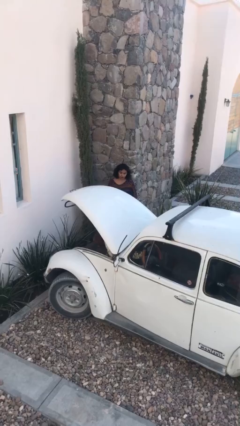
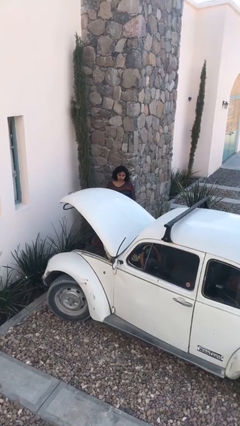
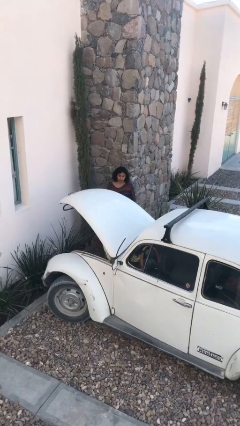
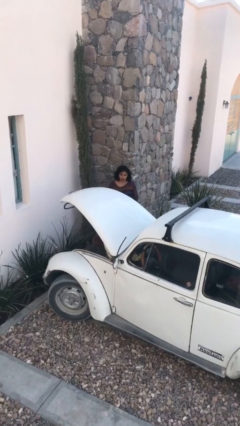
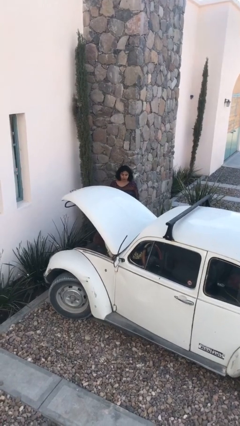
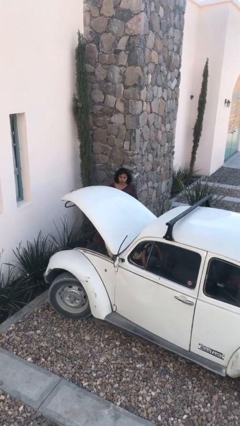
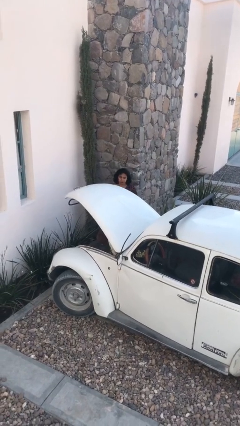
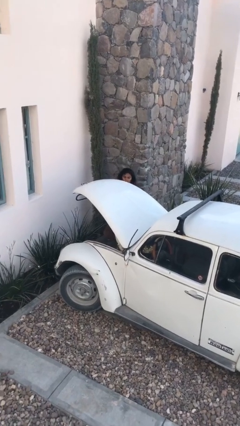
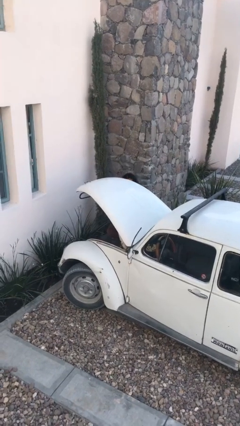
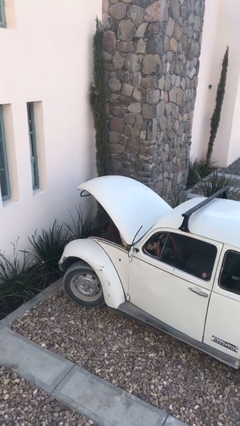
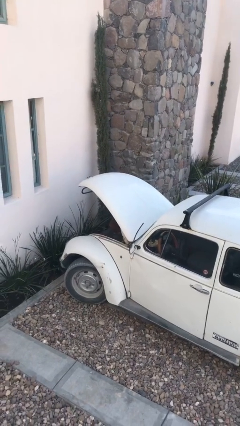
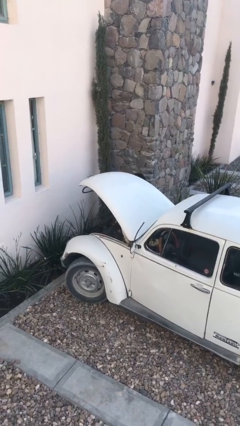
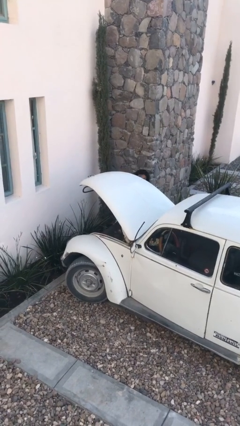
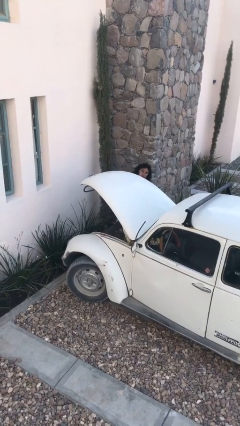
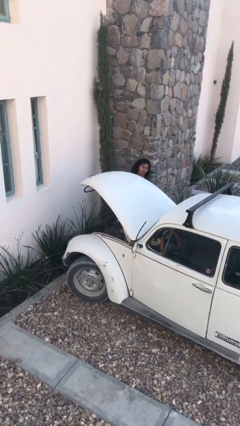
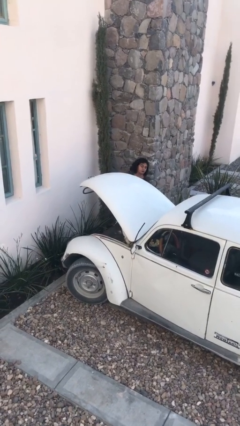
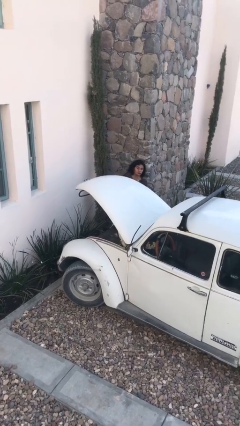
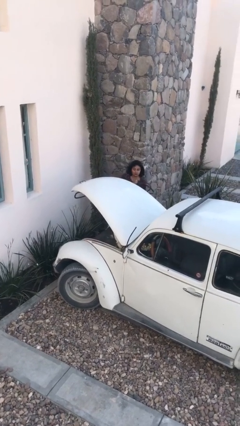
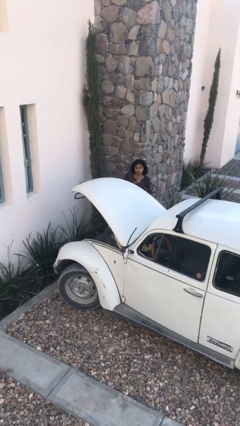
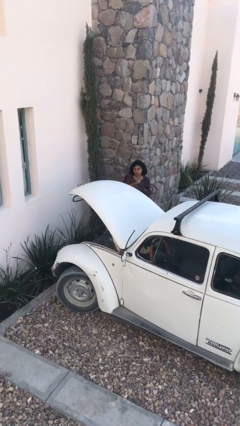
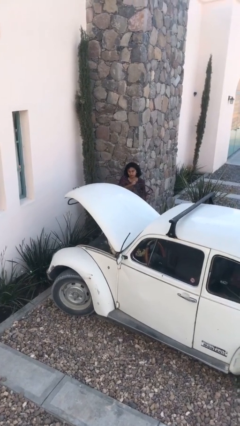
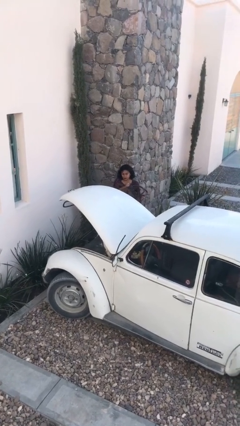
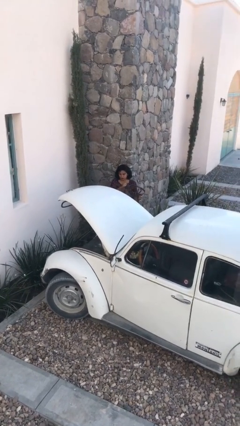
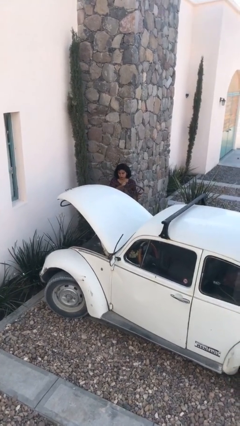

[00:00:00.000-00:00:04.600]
person unloads car

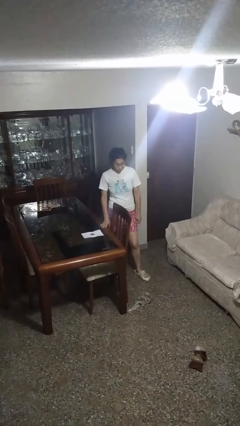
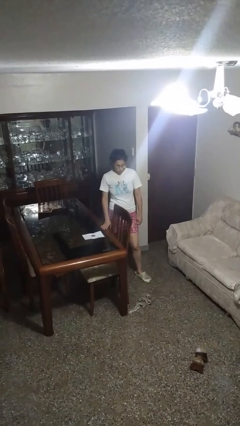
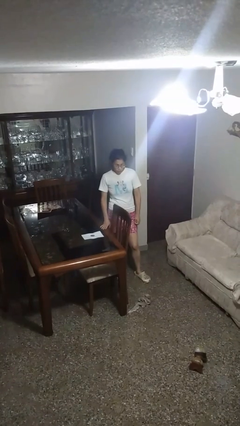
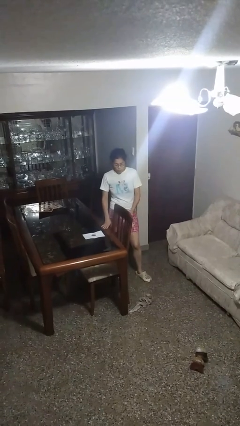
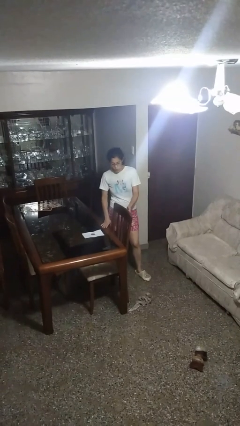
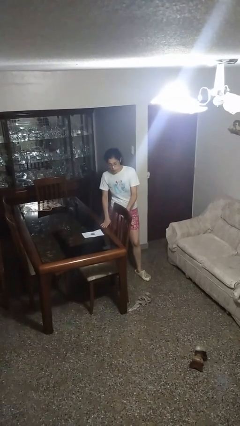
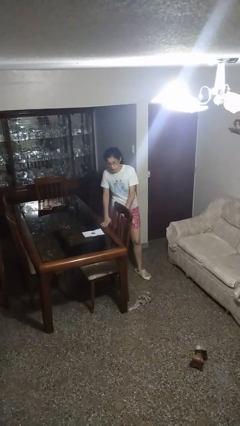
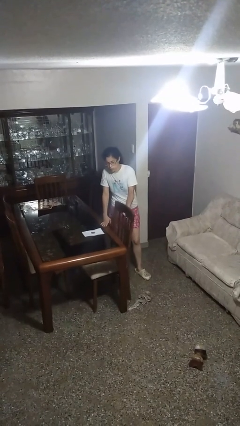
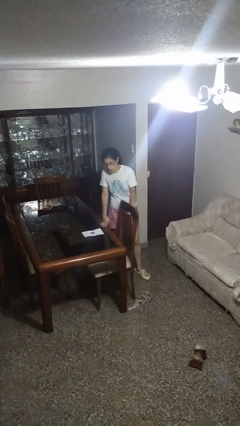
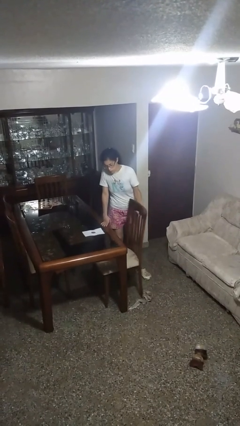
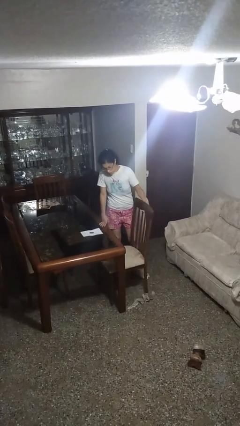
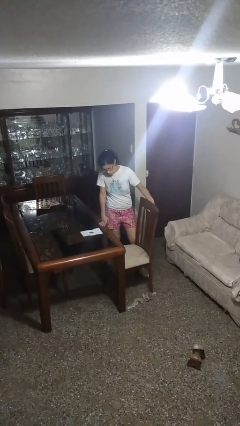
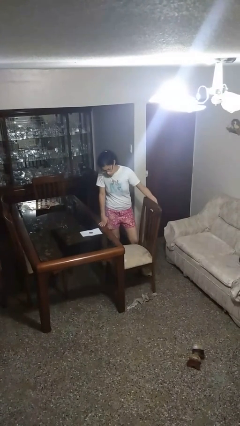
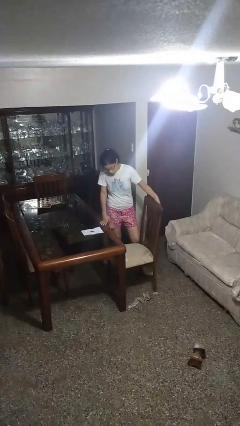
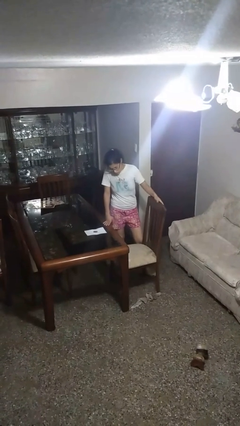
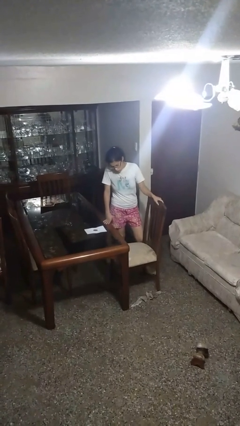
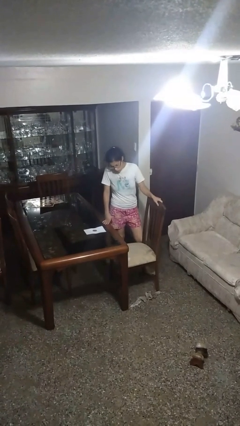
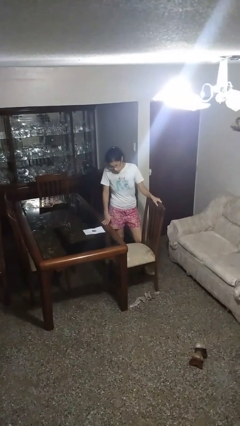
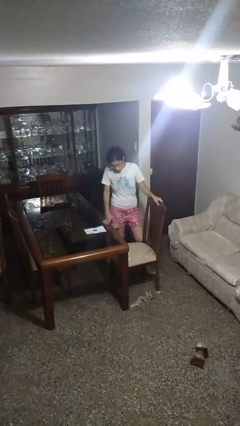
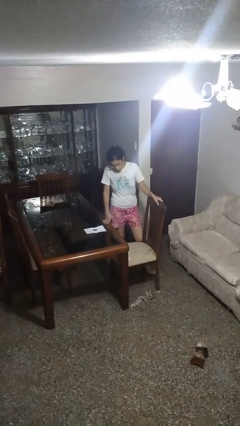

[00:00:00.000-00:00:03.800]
person pulls out chair

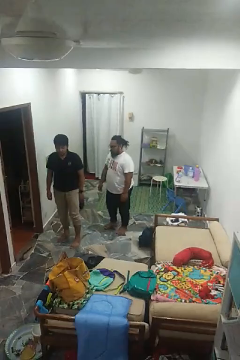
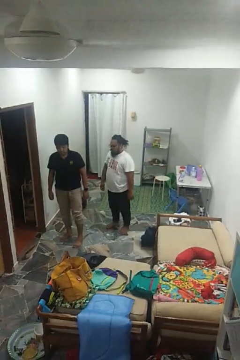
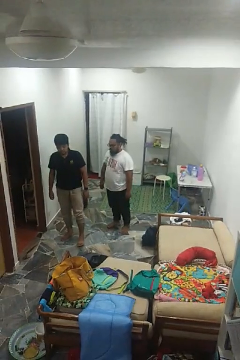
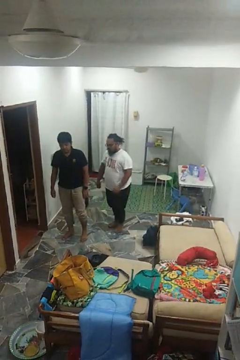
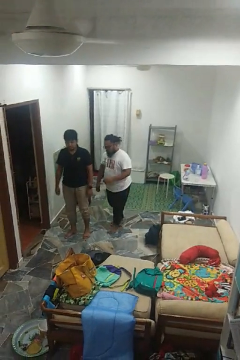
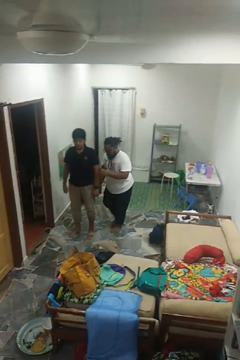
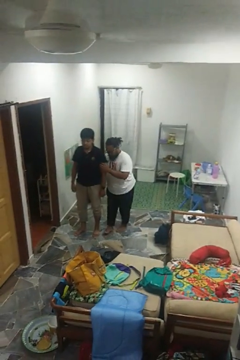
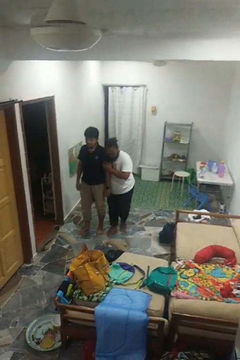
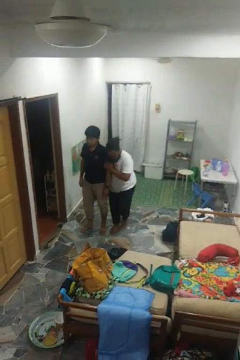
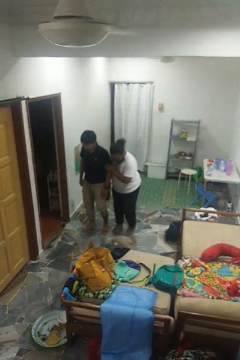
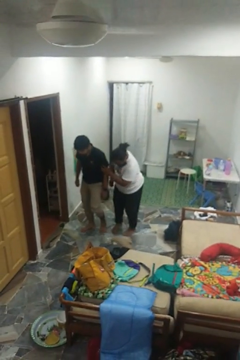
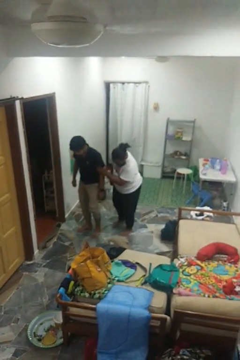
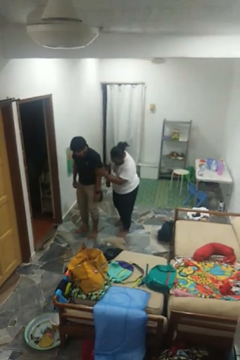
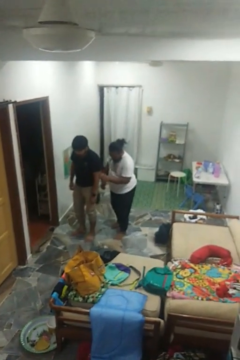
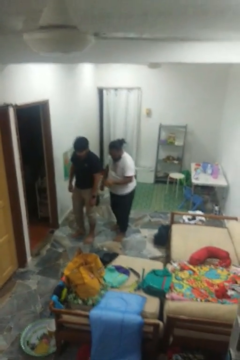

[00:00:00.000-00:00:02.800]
person bumps into person

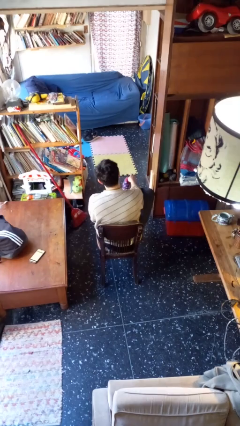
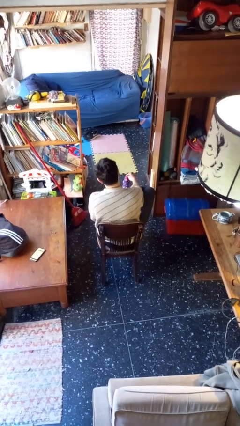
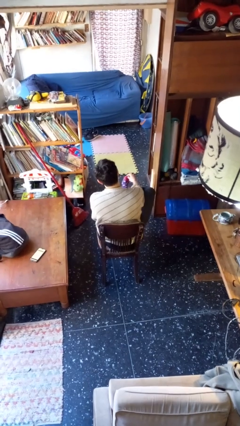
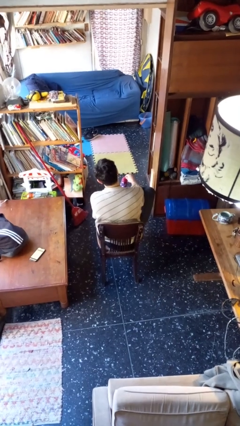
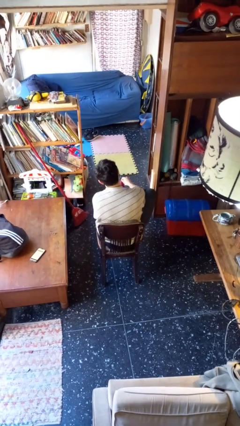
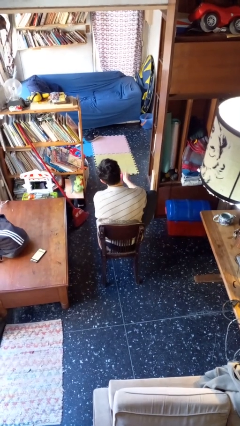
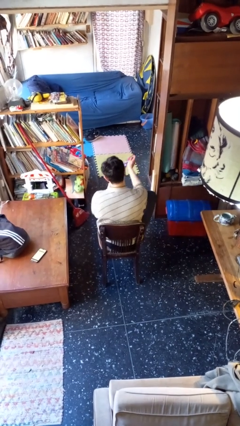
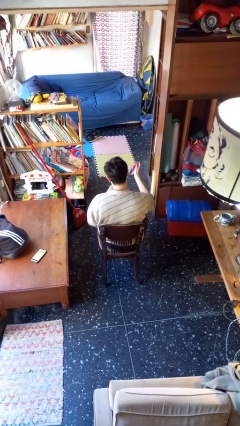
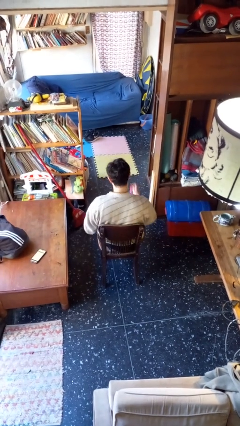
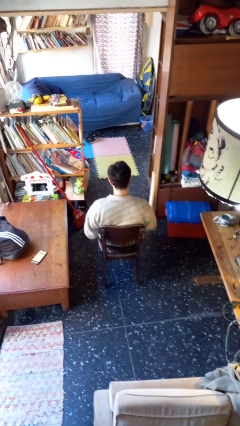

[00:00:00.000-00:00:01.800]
person takes off socks

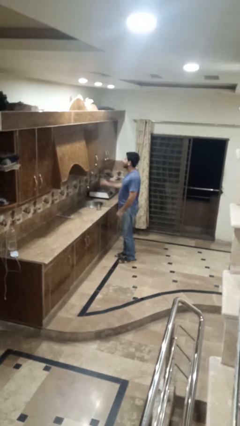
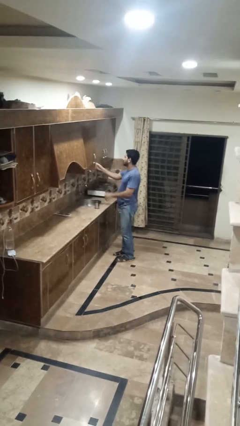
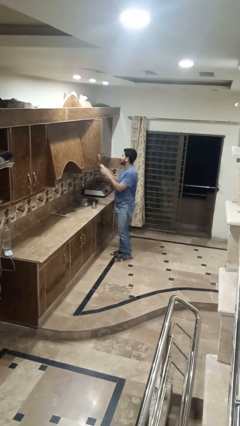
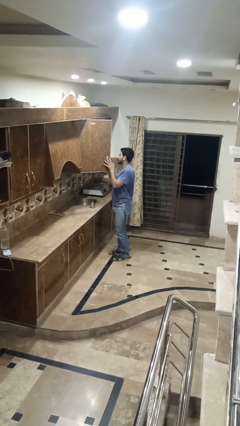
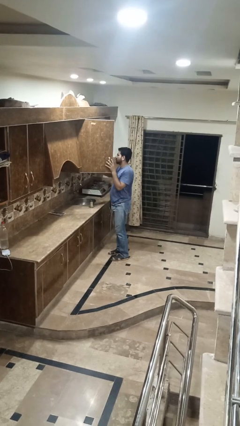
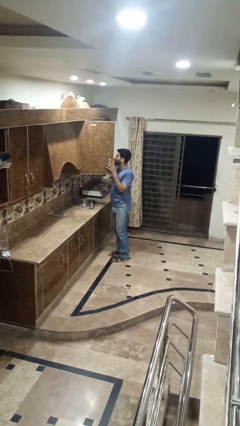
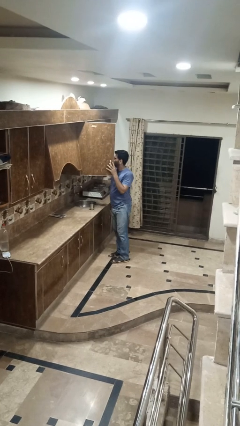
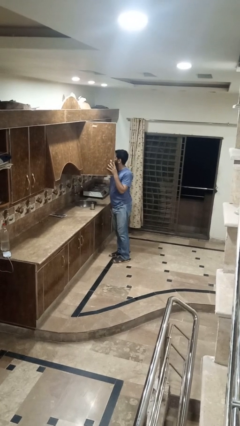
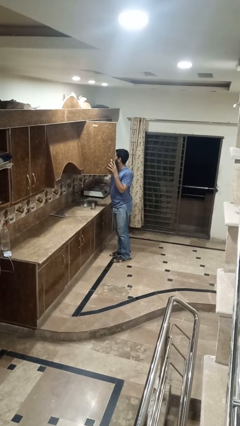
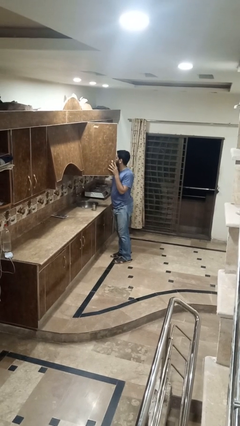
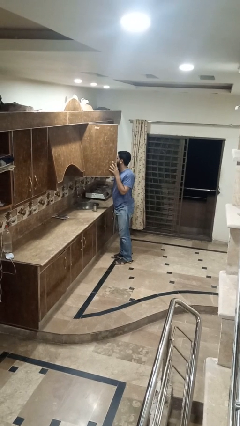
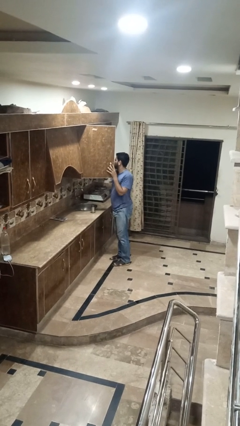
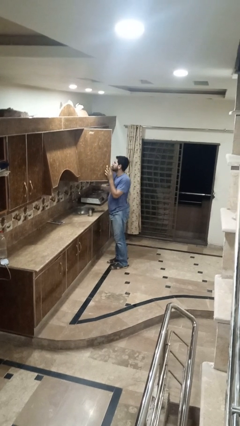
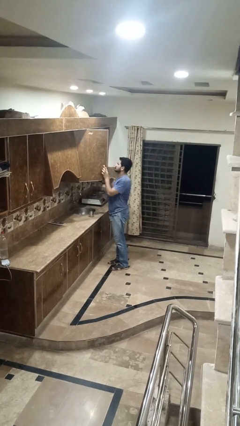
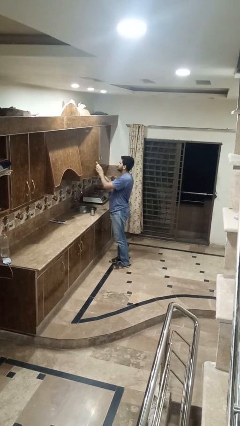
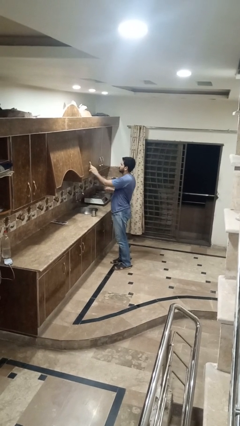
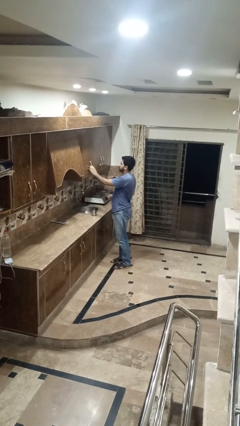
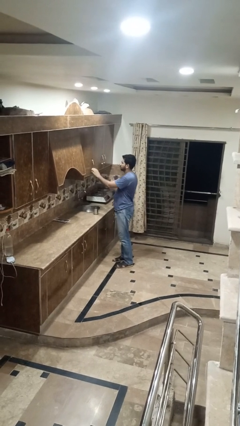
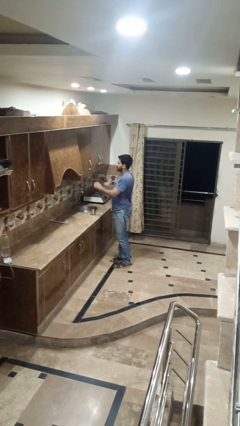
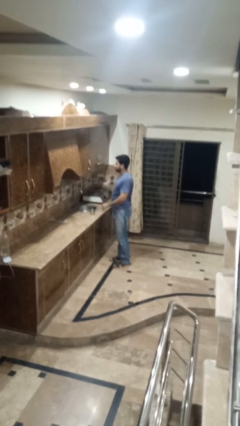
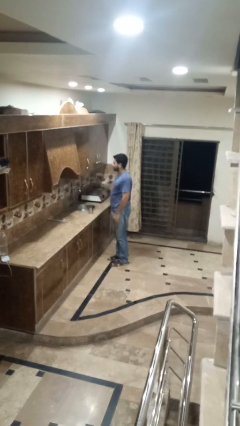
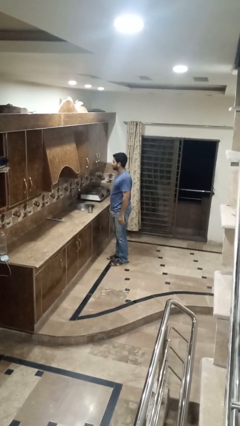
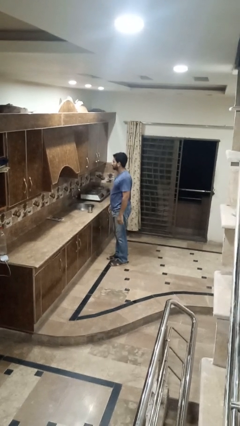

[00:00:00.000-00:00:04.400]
person searches in cabinet

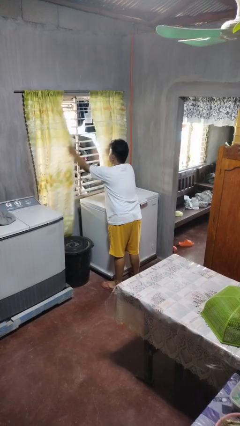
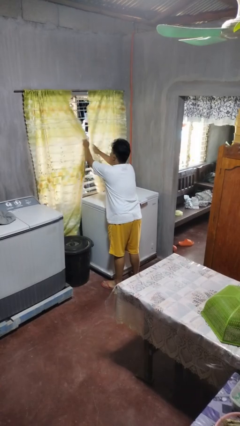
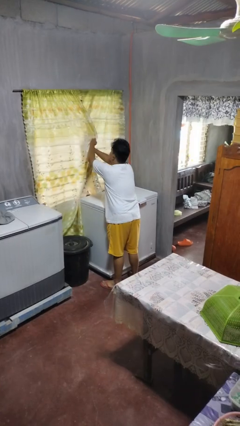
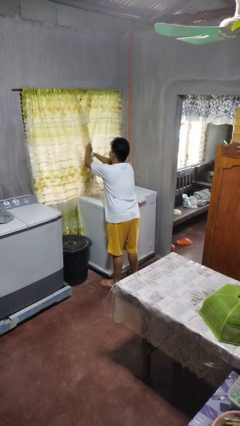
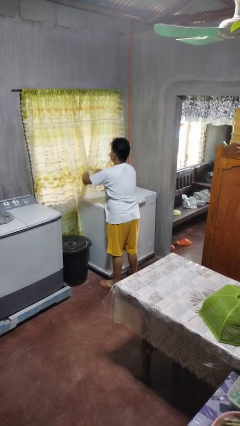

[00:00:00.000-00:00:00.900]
person closes curtains

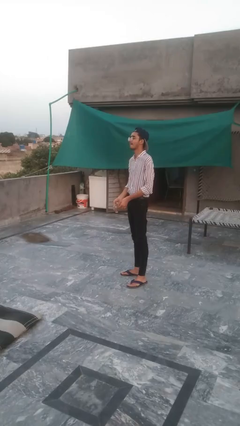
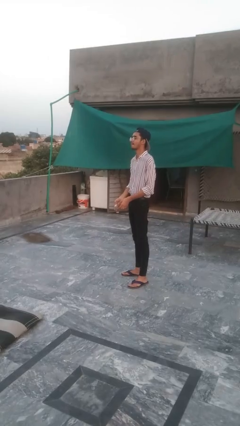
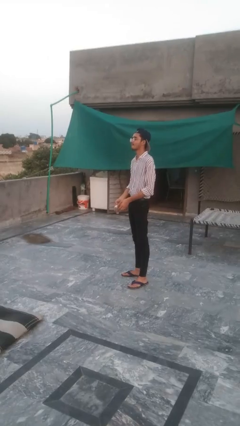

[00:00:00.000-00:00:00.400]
person picks up object from floor
